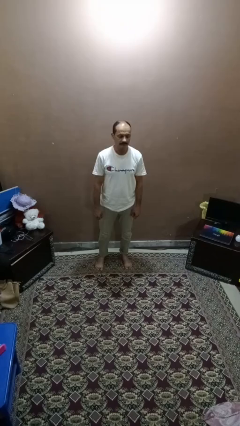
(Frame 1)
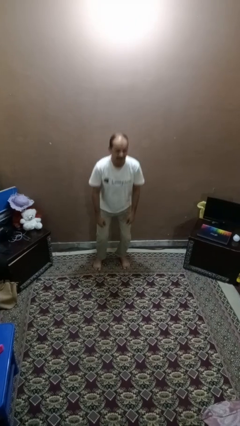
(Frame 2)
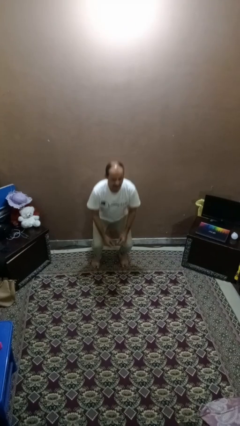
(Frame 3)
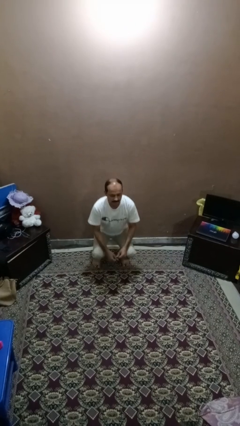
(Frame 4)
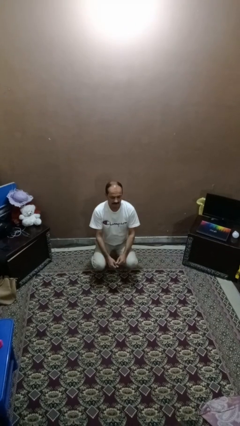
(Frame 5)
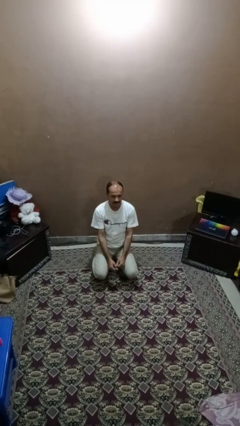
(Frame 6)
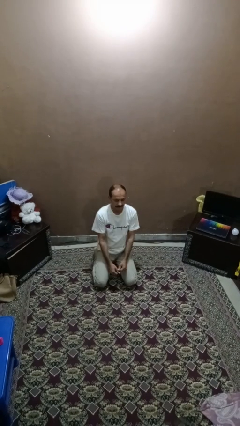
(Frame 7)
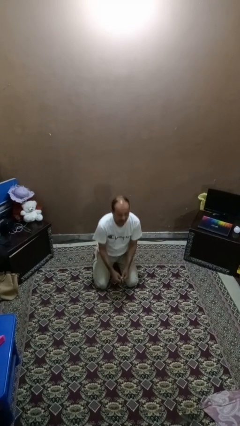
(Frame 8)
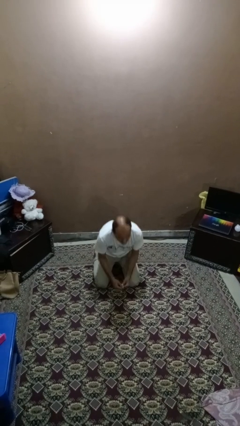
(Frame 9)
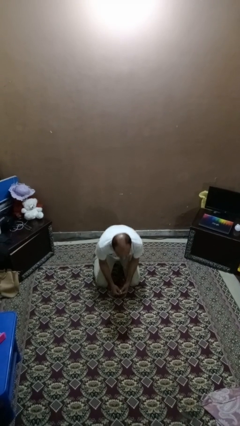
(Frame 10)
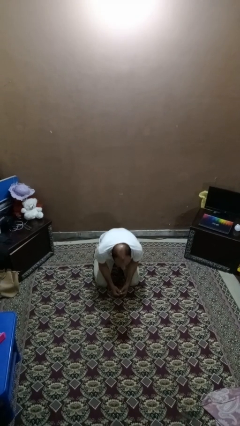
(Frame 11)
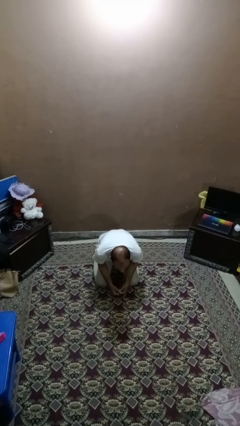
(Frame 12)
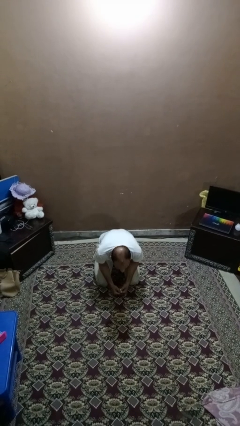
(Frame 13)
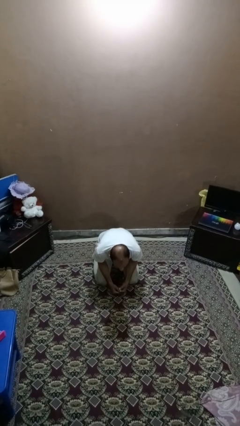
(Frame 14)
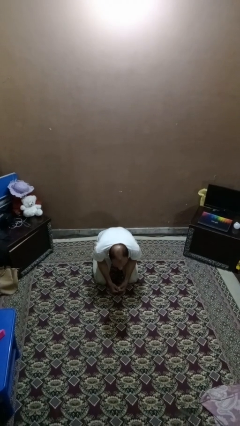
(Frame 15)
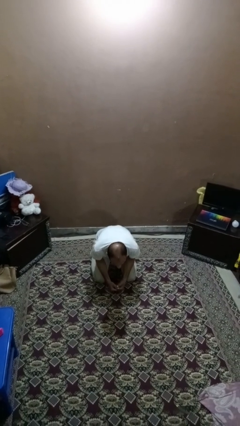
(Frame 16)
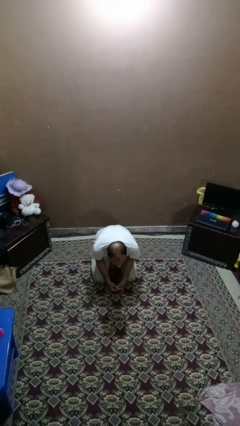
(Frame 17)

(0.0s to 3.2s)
person kneels

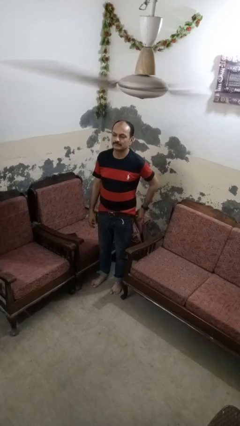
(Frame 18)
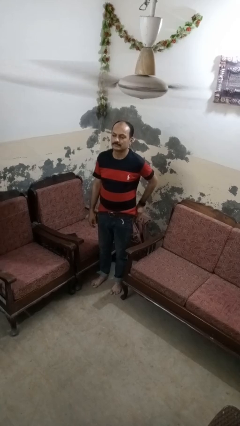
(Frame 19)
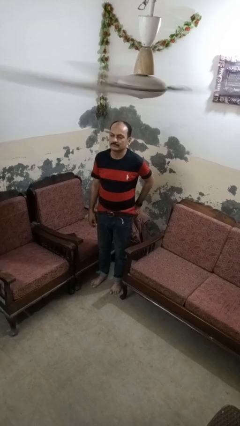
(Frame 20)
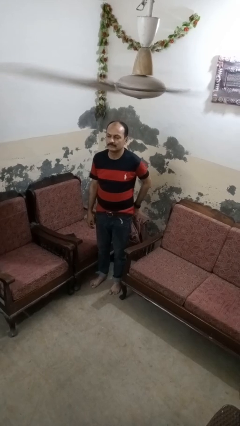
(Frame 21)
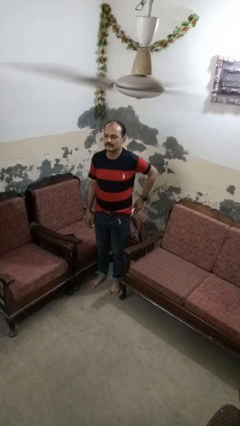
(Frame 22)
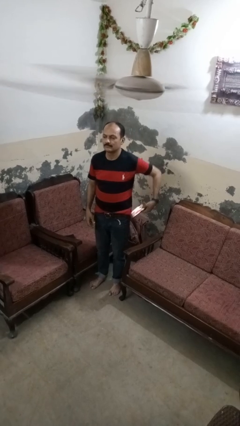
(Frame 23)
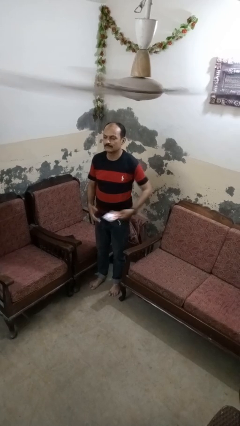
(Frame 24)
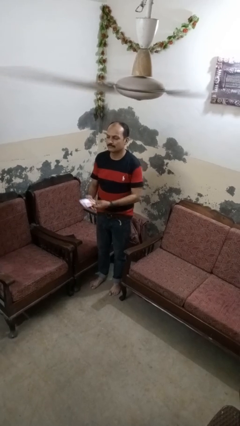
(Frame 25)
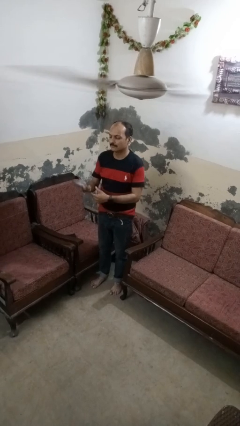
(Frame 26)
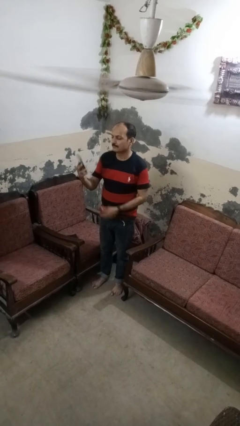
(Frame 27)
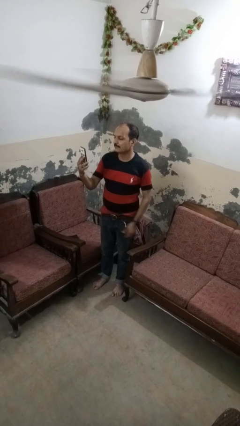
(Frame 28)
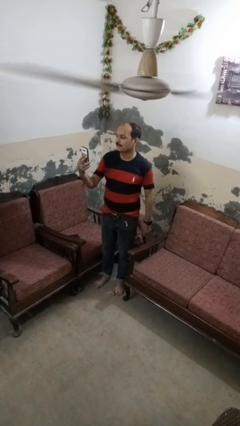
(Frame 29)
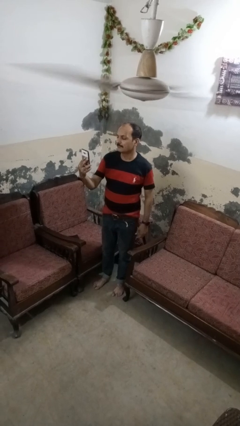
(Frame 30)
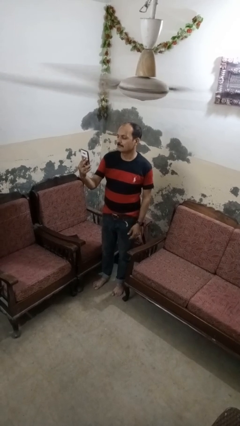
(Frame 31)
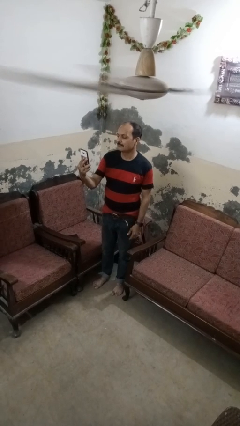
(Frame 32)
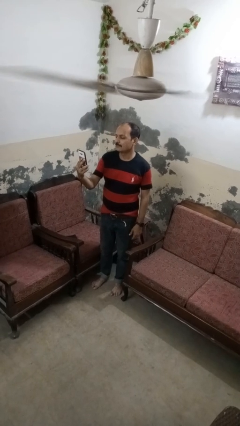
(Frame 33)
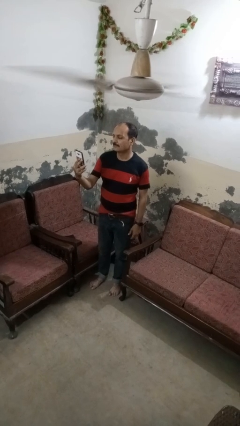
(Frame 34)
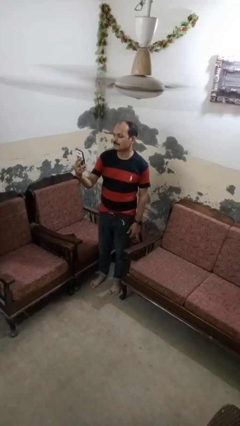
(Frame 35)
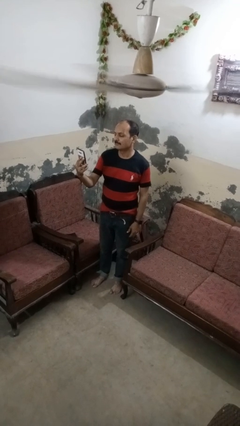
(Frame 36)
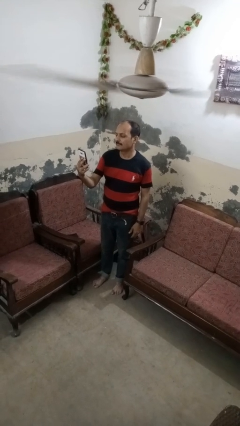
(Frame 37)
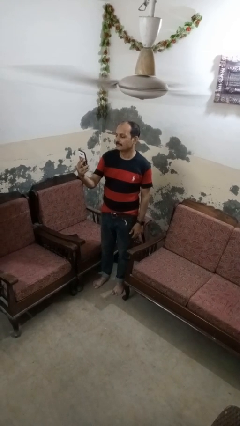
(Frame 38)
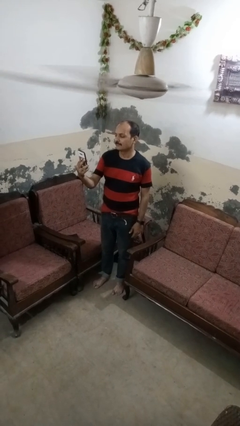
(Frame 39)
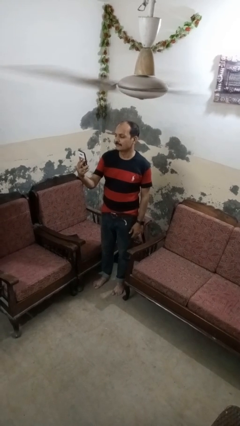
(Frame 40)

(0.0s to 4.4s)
person takes phone from pocket

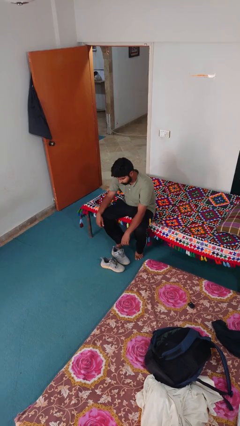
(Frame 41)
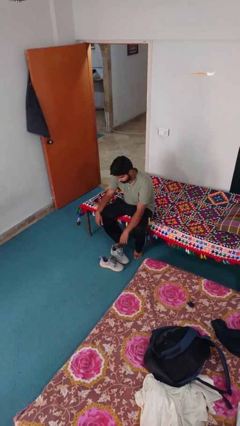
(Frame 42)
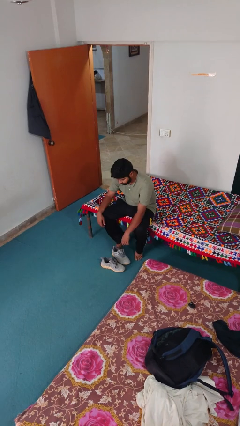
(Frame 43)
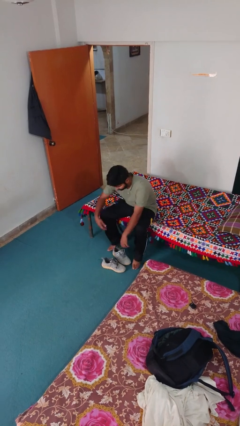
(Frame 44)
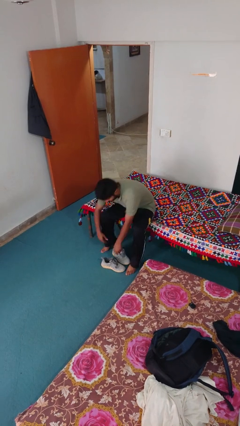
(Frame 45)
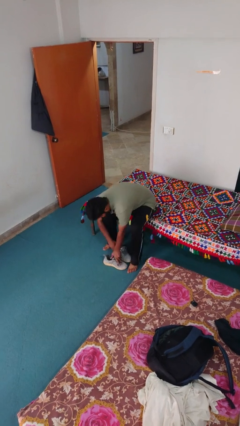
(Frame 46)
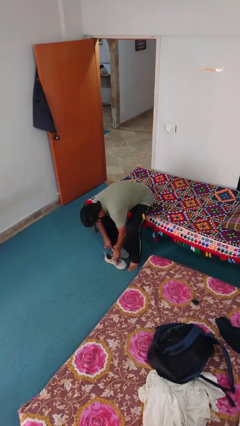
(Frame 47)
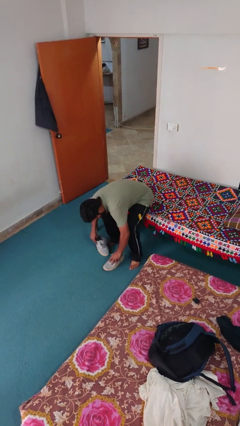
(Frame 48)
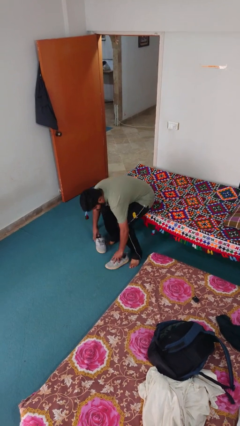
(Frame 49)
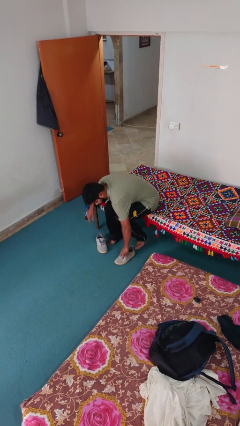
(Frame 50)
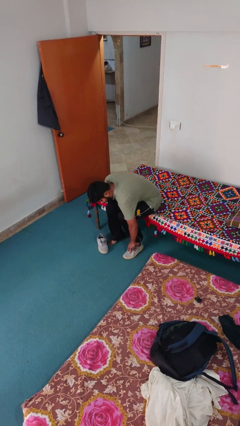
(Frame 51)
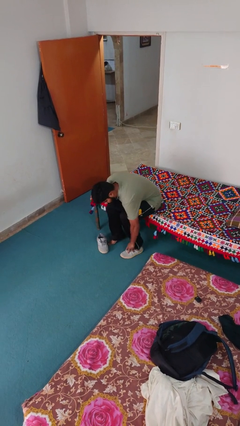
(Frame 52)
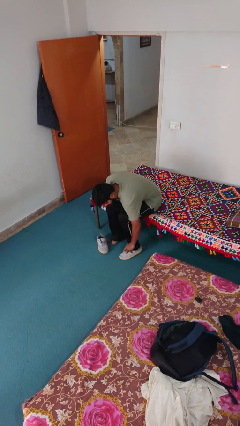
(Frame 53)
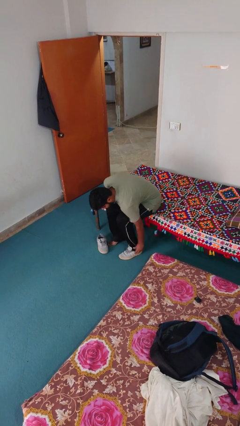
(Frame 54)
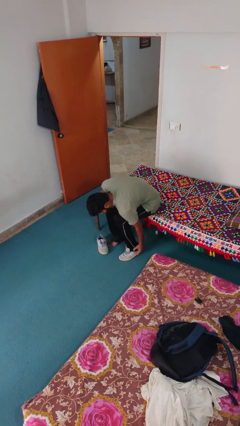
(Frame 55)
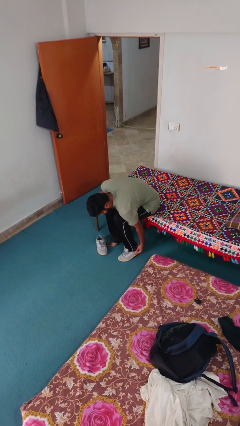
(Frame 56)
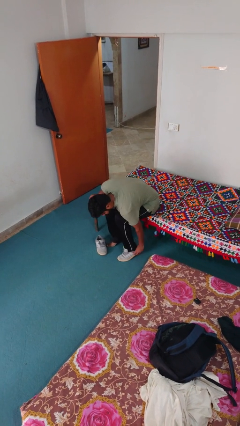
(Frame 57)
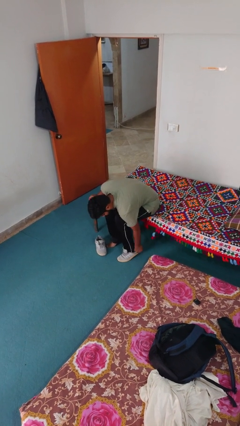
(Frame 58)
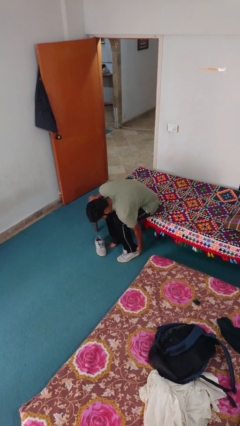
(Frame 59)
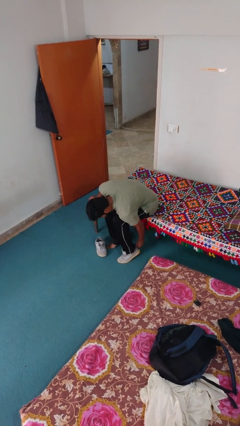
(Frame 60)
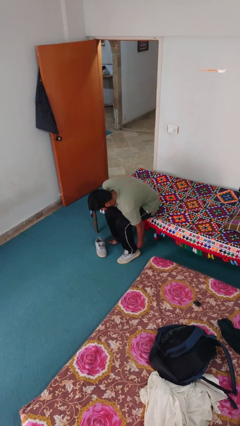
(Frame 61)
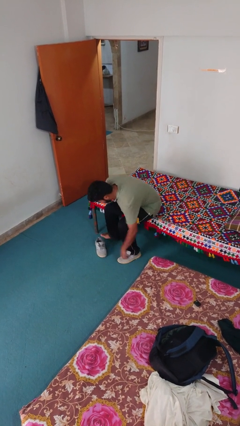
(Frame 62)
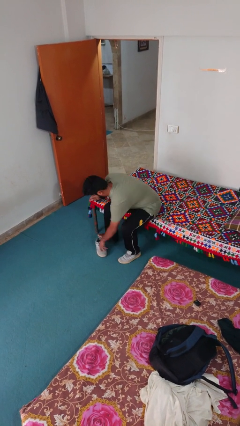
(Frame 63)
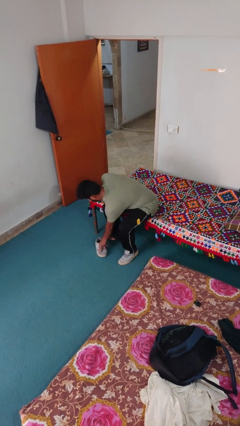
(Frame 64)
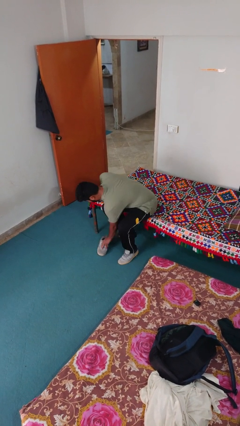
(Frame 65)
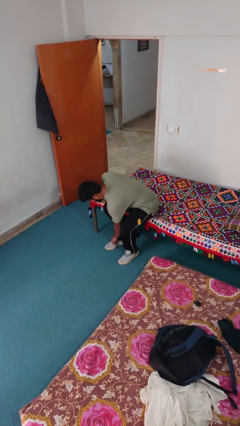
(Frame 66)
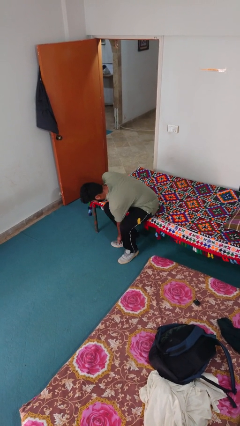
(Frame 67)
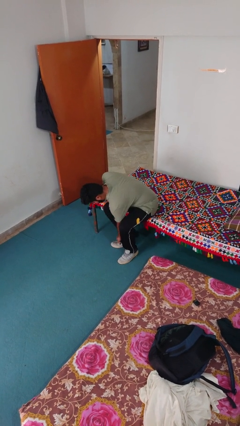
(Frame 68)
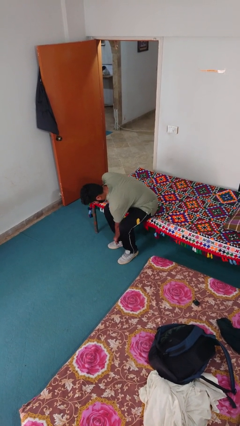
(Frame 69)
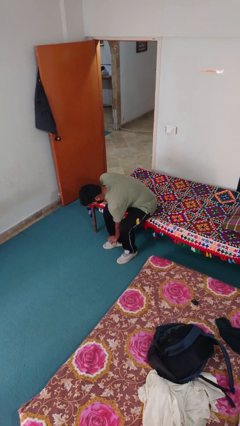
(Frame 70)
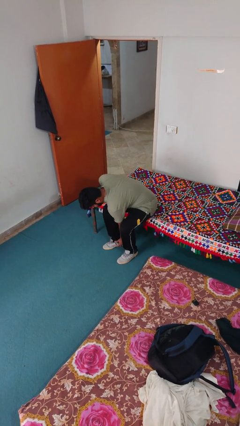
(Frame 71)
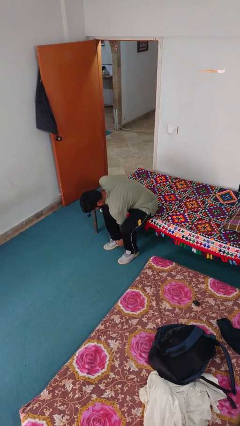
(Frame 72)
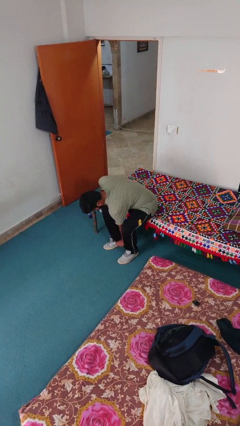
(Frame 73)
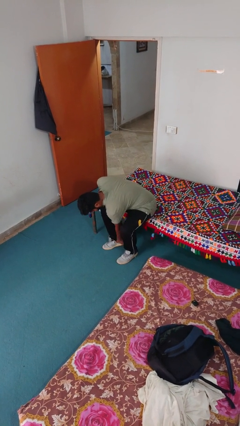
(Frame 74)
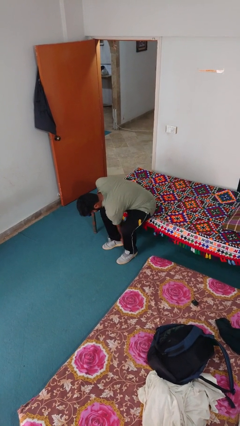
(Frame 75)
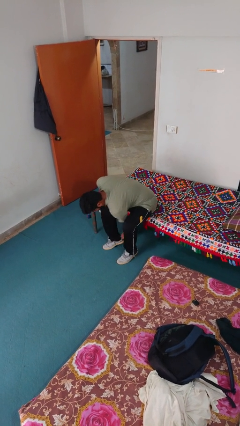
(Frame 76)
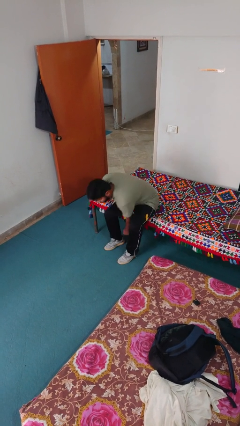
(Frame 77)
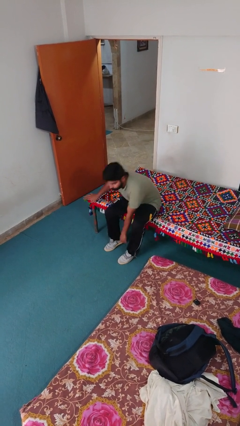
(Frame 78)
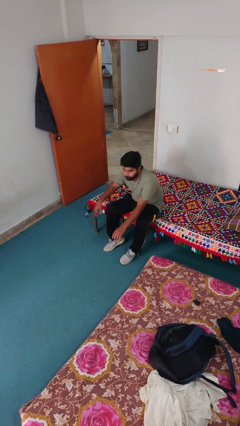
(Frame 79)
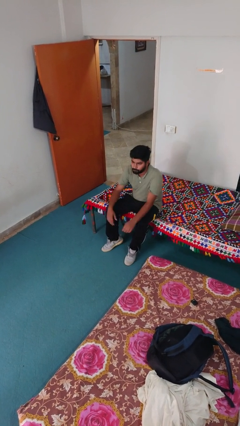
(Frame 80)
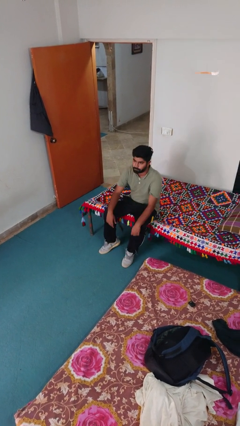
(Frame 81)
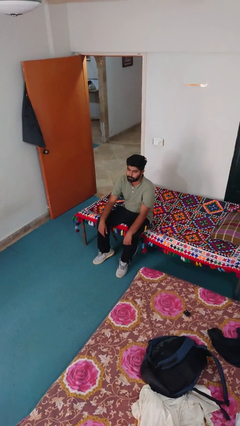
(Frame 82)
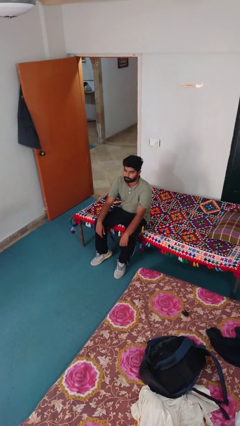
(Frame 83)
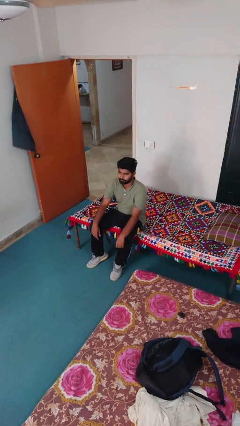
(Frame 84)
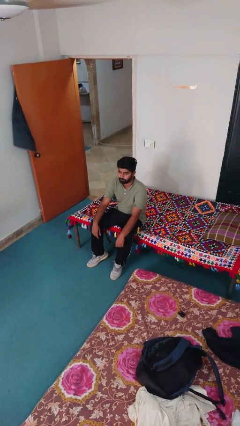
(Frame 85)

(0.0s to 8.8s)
person puts on shoes

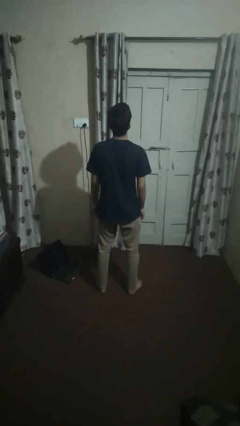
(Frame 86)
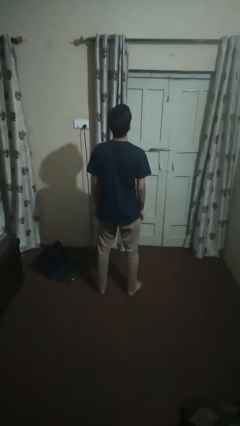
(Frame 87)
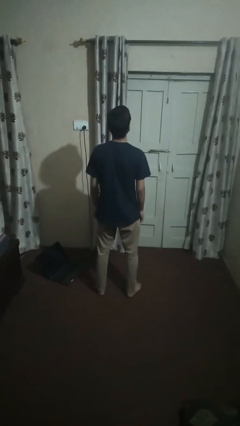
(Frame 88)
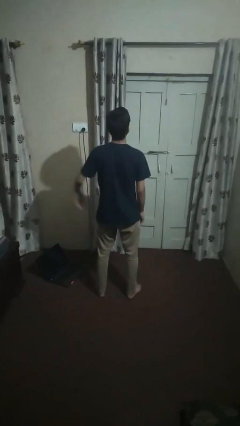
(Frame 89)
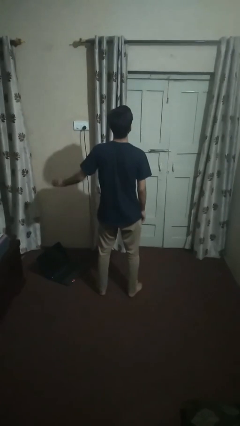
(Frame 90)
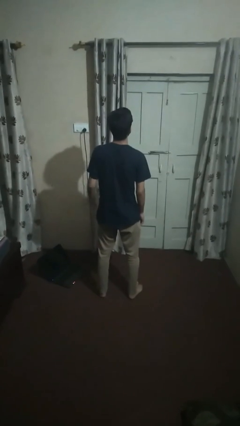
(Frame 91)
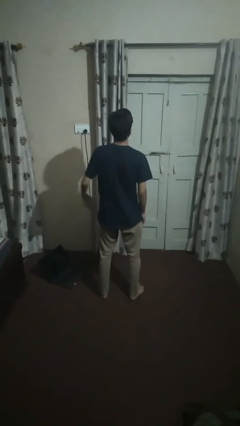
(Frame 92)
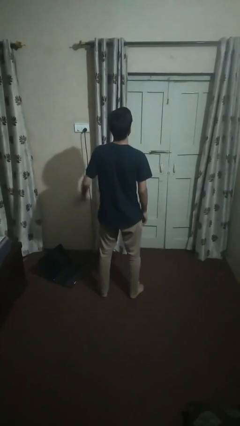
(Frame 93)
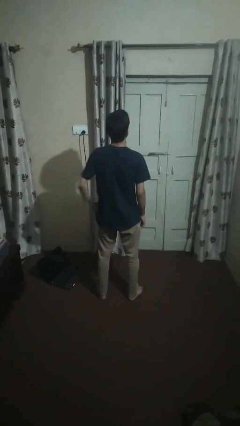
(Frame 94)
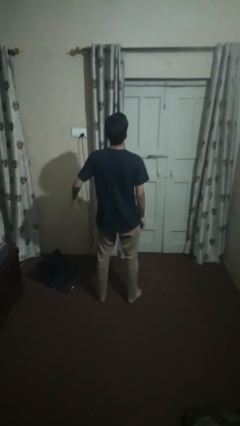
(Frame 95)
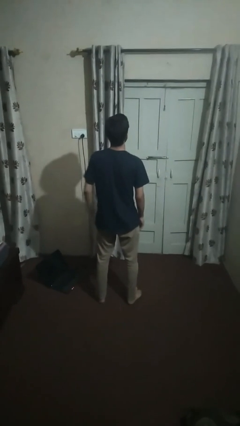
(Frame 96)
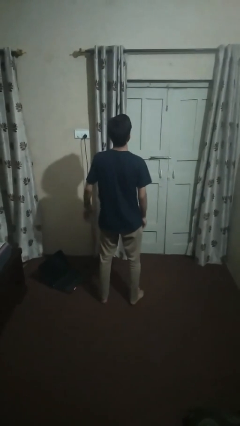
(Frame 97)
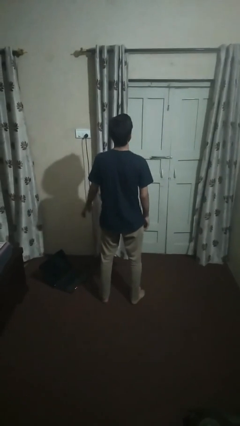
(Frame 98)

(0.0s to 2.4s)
person slaps hands on thighs
